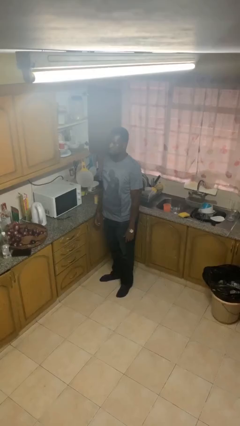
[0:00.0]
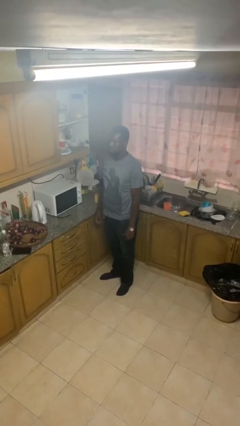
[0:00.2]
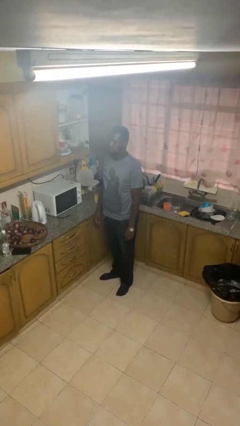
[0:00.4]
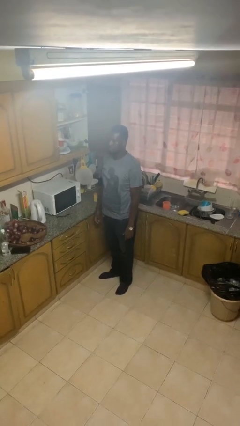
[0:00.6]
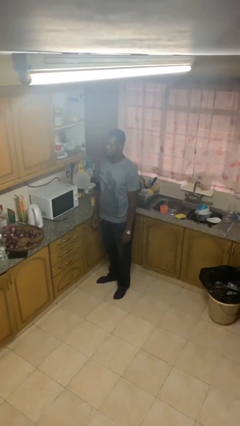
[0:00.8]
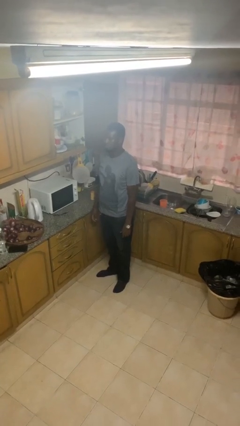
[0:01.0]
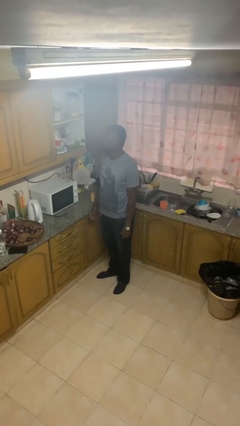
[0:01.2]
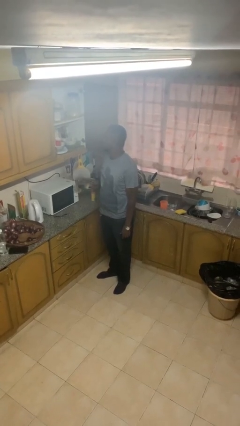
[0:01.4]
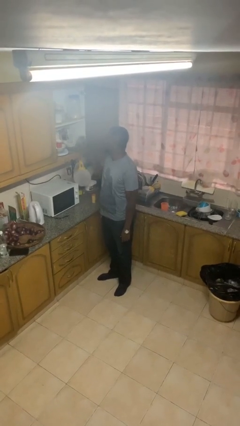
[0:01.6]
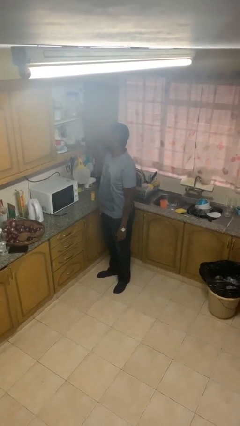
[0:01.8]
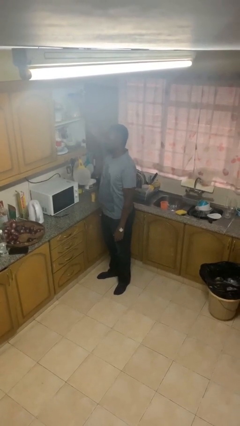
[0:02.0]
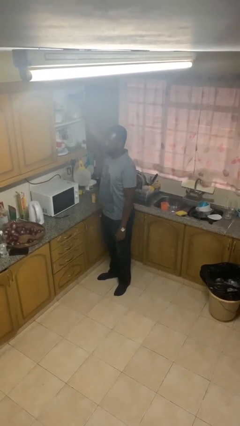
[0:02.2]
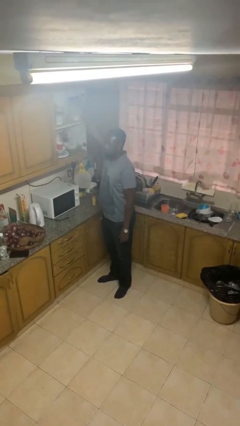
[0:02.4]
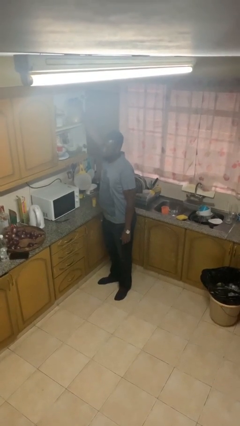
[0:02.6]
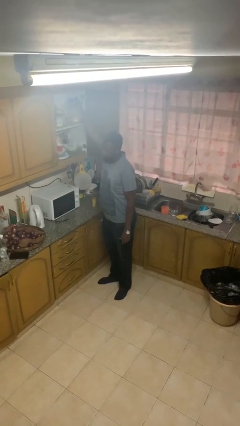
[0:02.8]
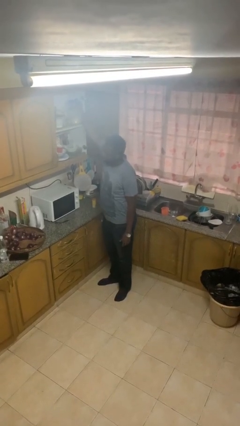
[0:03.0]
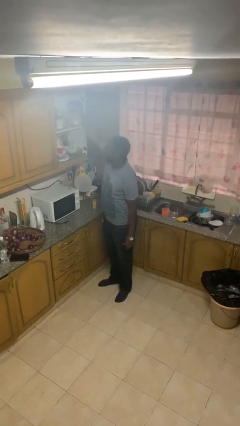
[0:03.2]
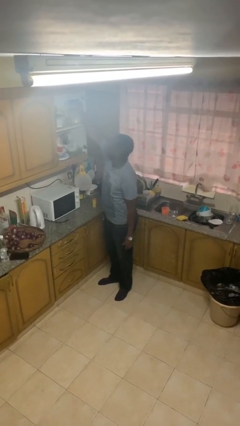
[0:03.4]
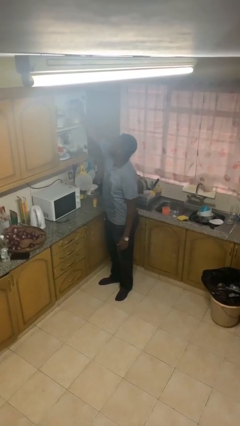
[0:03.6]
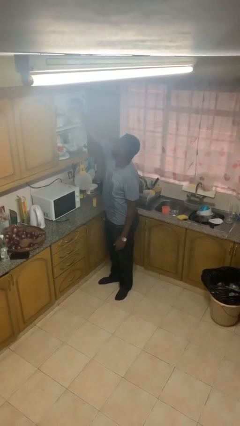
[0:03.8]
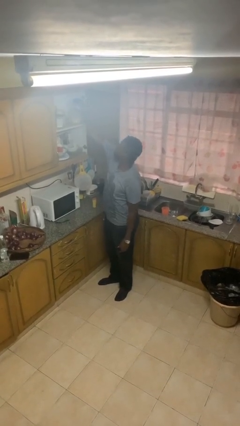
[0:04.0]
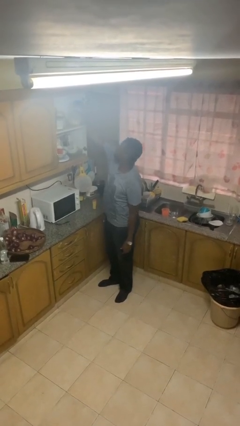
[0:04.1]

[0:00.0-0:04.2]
person picks up object from shelf

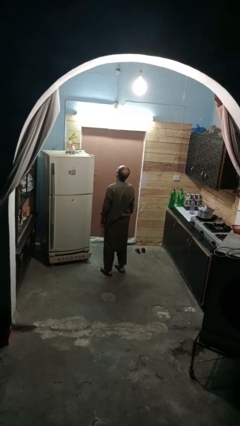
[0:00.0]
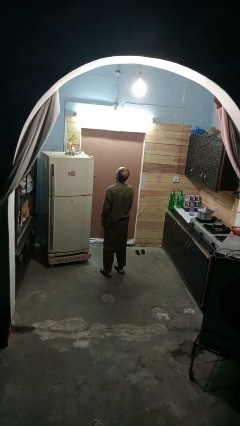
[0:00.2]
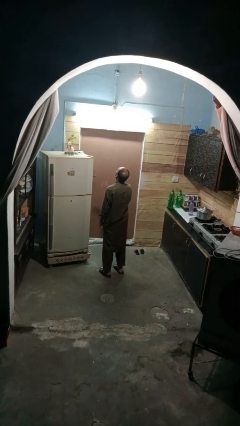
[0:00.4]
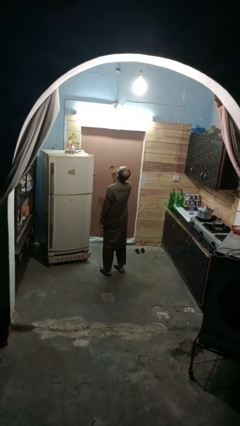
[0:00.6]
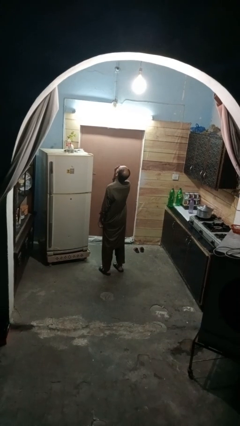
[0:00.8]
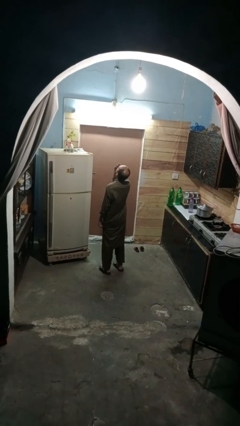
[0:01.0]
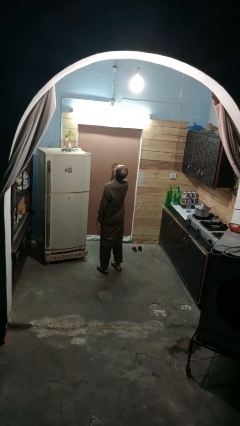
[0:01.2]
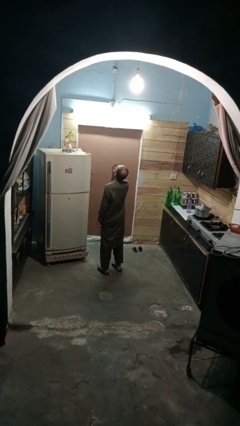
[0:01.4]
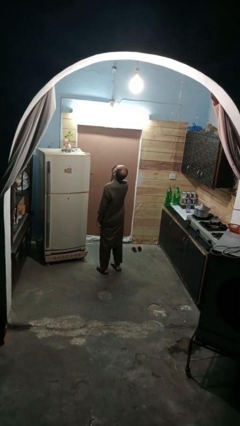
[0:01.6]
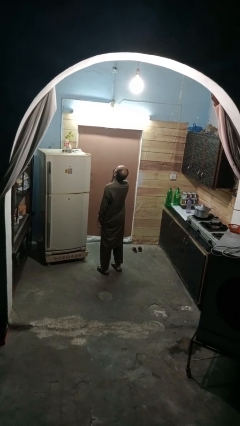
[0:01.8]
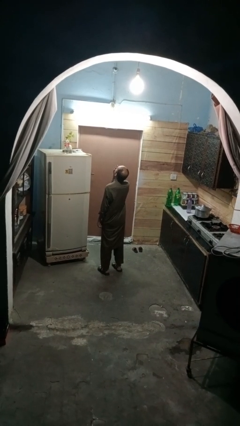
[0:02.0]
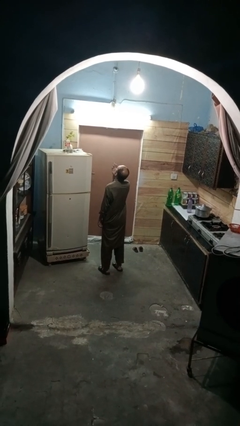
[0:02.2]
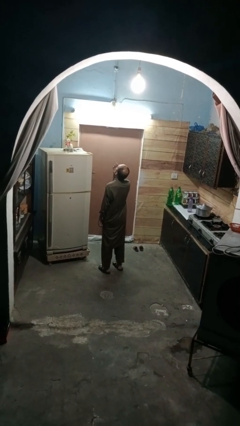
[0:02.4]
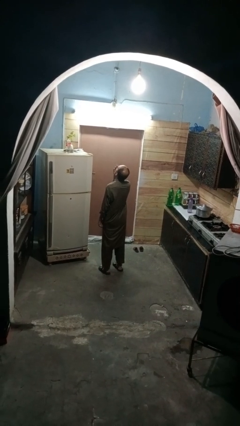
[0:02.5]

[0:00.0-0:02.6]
person yawns

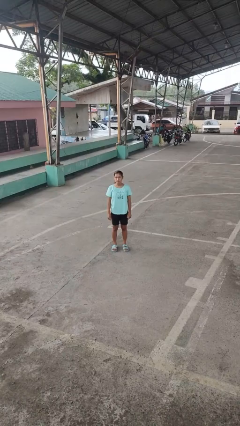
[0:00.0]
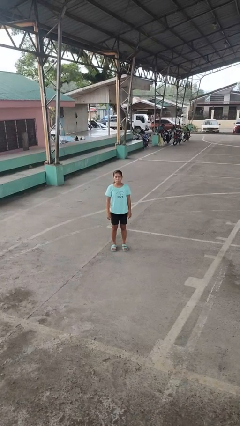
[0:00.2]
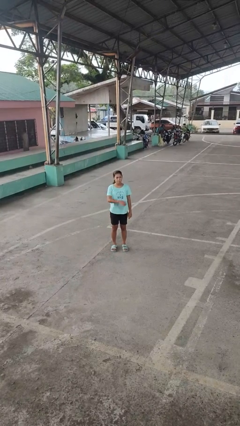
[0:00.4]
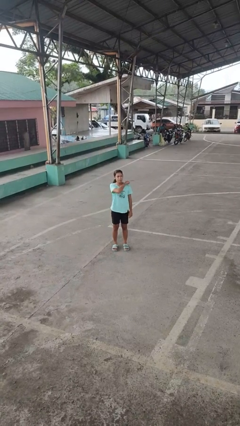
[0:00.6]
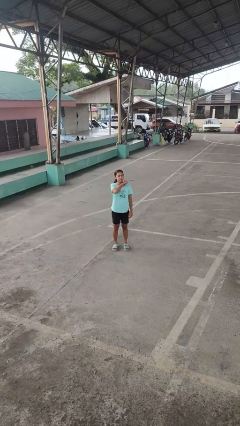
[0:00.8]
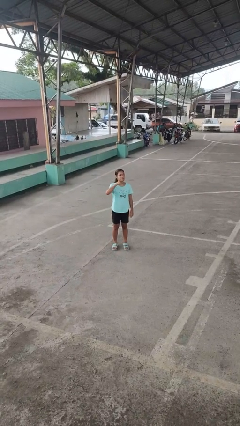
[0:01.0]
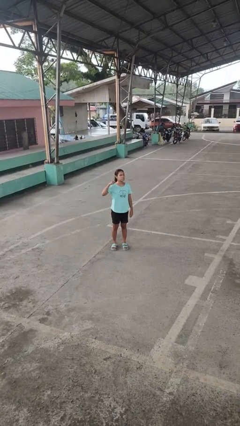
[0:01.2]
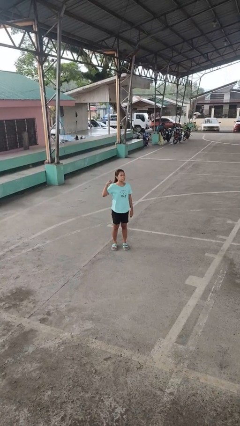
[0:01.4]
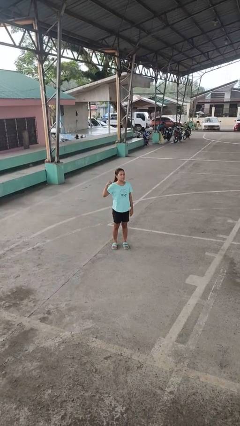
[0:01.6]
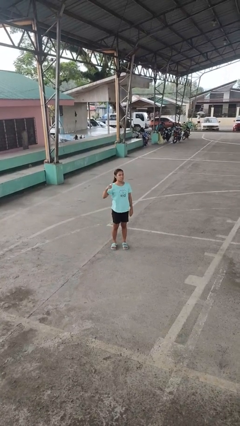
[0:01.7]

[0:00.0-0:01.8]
person gestures cut

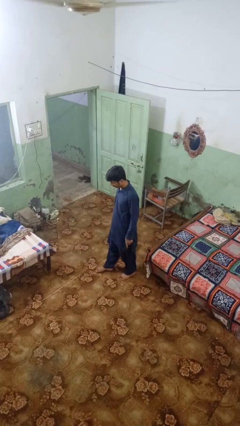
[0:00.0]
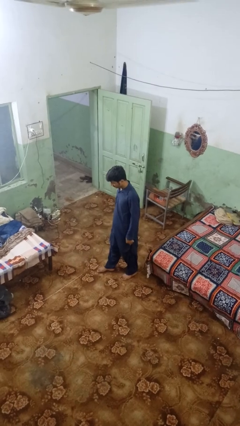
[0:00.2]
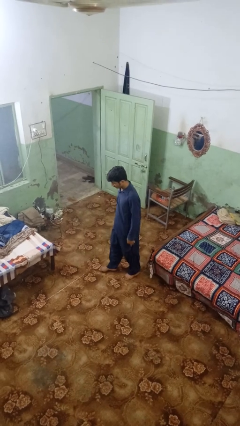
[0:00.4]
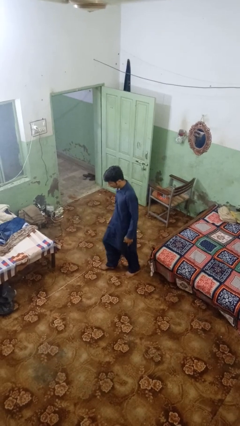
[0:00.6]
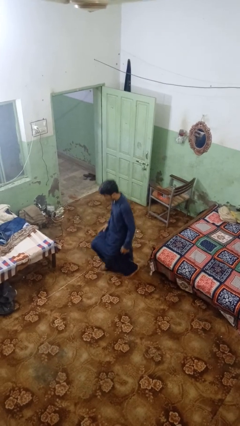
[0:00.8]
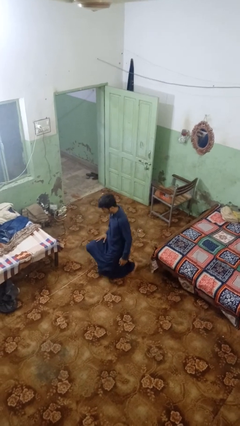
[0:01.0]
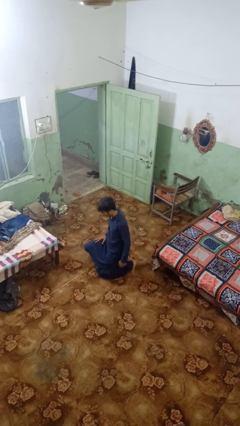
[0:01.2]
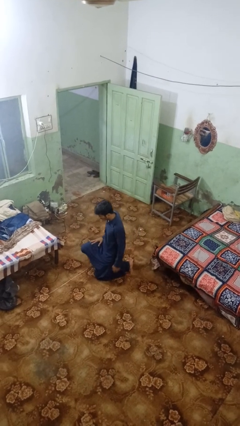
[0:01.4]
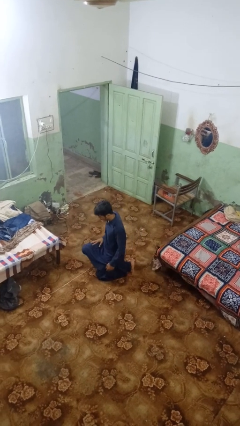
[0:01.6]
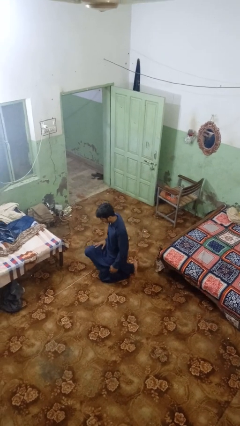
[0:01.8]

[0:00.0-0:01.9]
person kneels

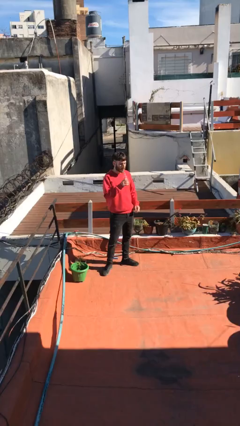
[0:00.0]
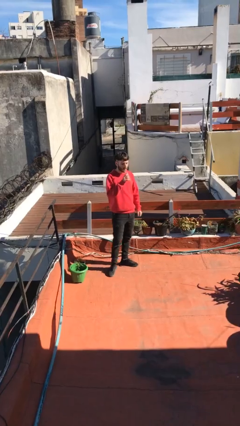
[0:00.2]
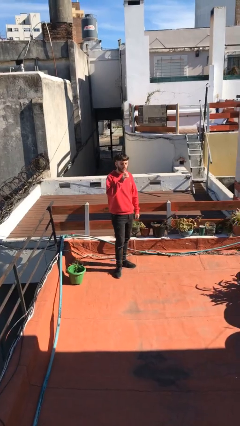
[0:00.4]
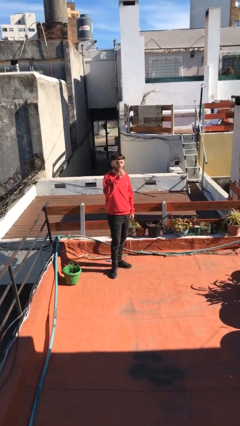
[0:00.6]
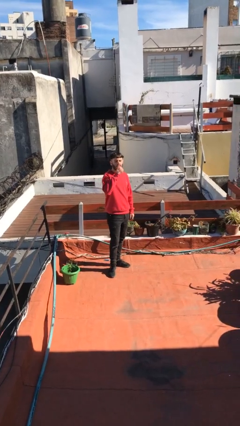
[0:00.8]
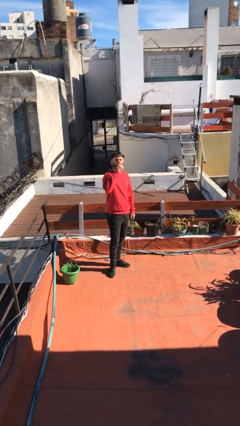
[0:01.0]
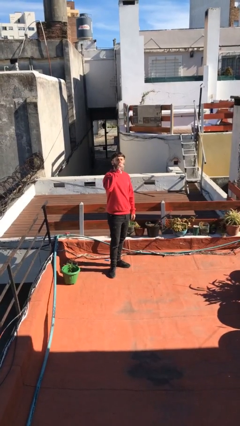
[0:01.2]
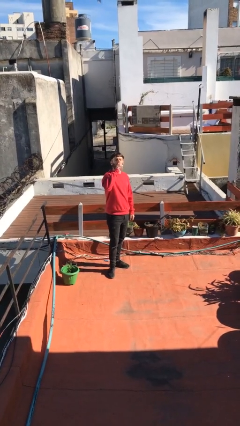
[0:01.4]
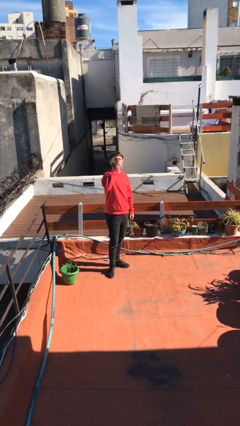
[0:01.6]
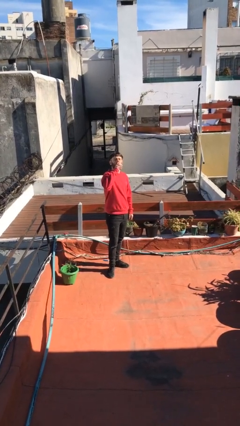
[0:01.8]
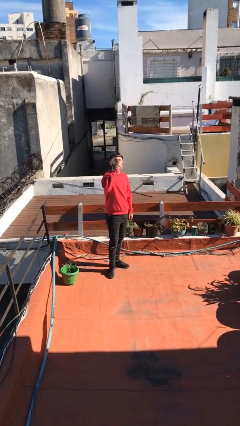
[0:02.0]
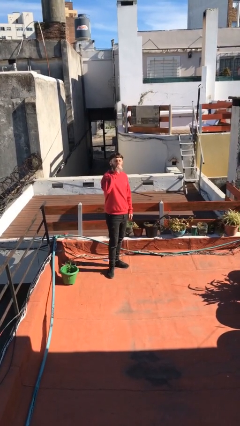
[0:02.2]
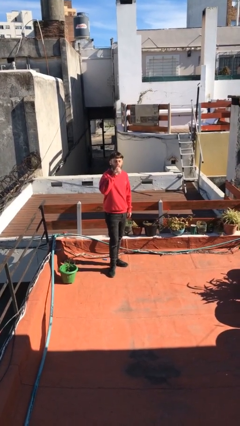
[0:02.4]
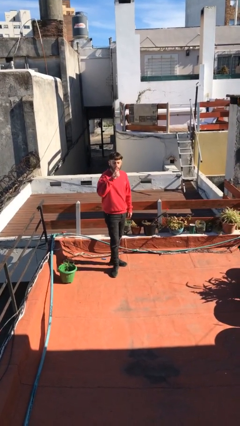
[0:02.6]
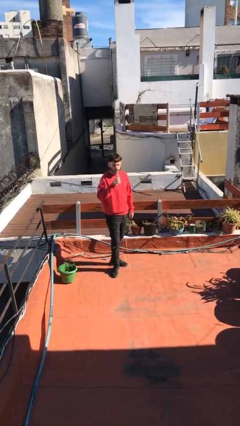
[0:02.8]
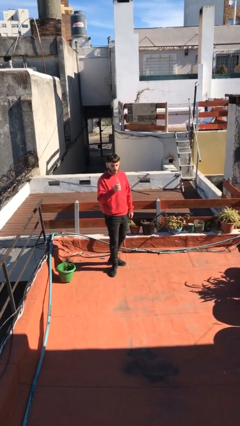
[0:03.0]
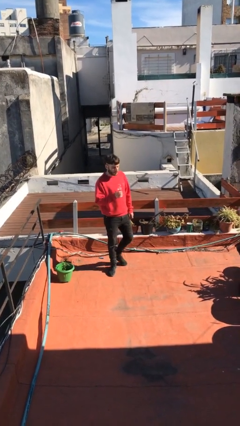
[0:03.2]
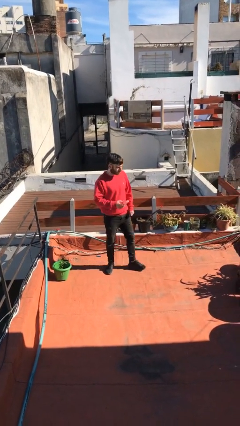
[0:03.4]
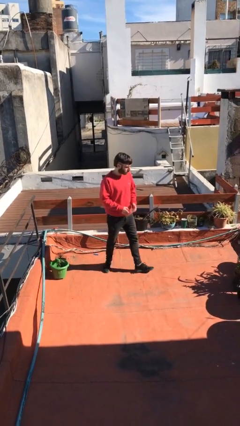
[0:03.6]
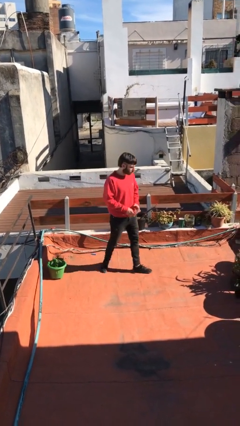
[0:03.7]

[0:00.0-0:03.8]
person drinks from bottle

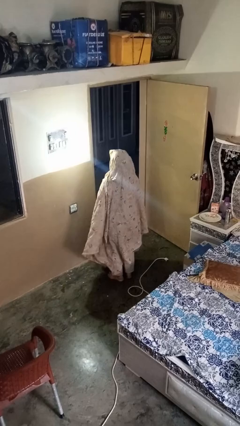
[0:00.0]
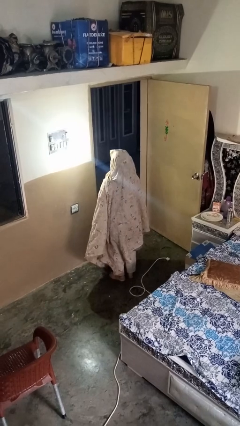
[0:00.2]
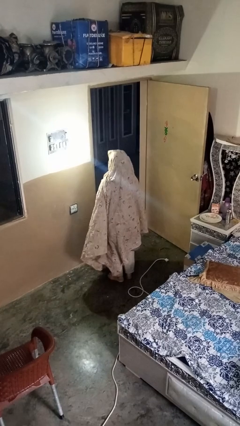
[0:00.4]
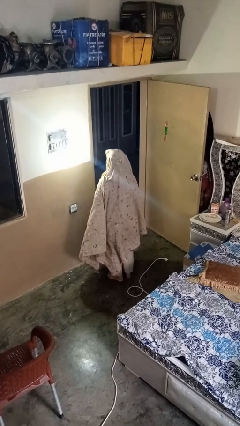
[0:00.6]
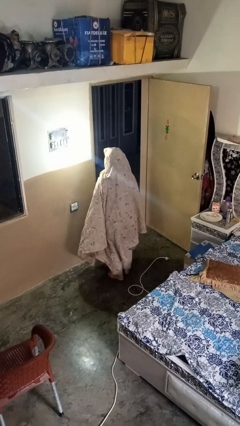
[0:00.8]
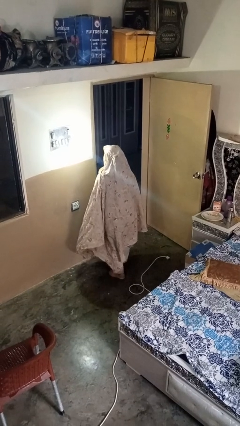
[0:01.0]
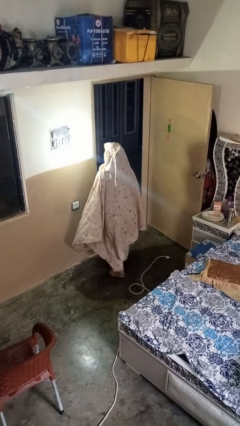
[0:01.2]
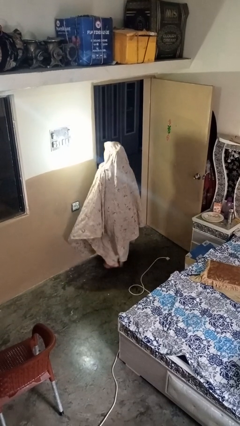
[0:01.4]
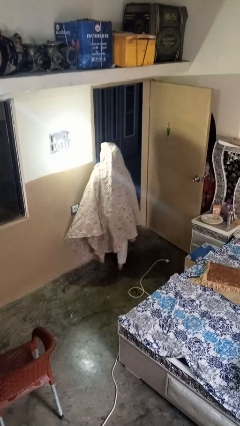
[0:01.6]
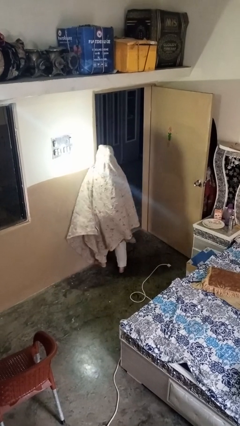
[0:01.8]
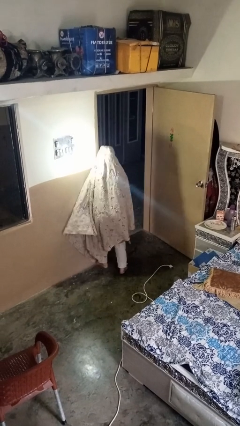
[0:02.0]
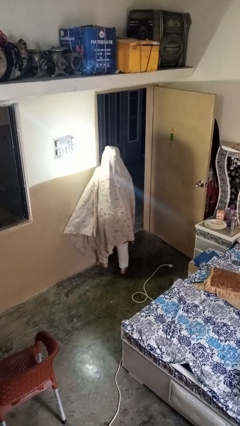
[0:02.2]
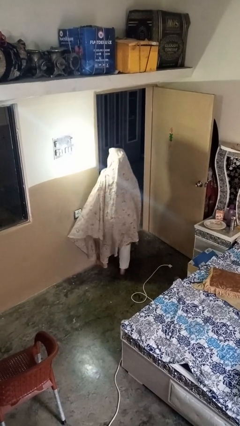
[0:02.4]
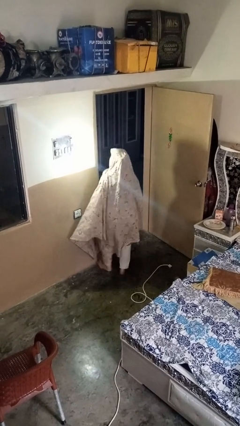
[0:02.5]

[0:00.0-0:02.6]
person bumps into wall

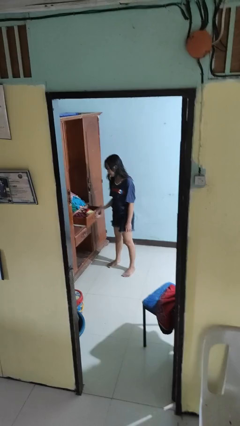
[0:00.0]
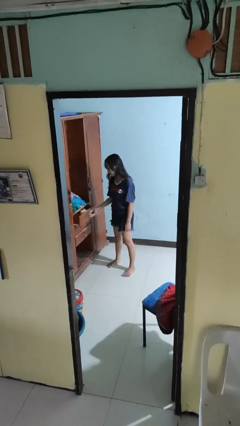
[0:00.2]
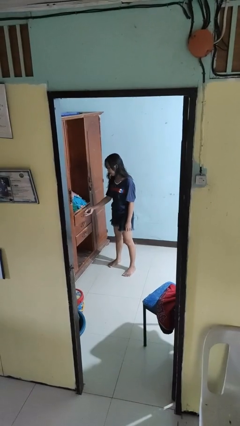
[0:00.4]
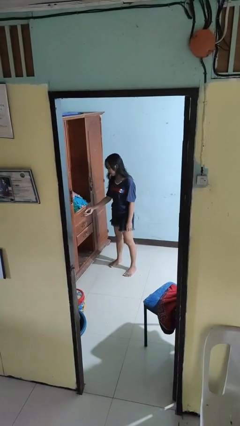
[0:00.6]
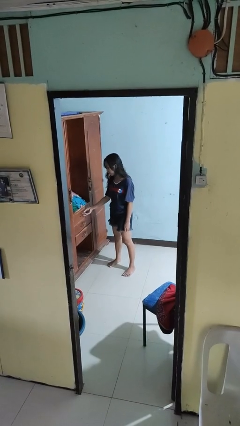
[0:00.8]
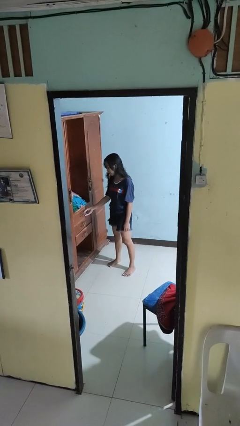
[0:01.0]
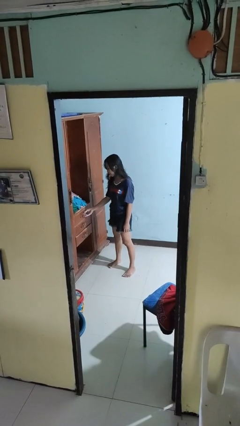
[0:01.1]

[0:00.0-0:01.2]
person closes dresser drawer
